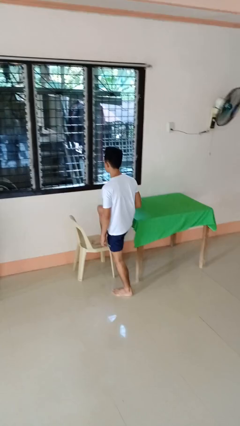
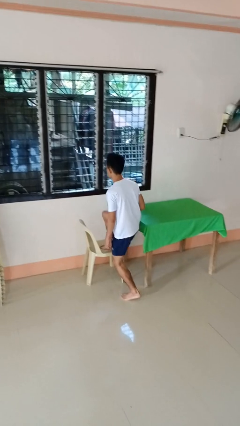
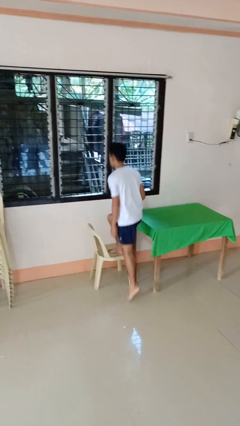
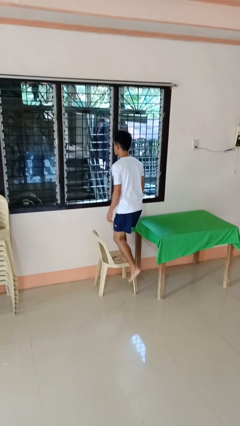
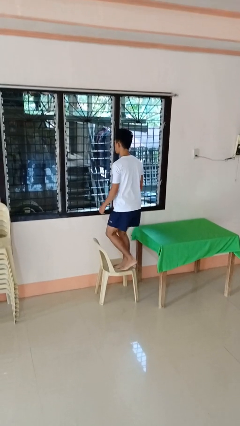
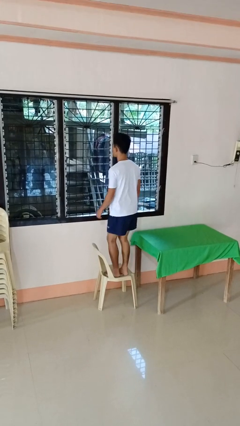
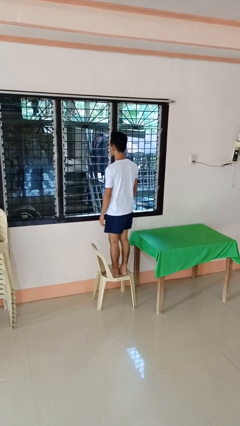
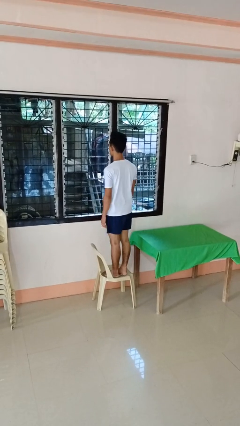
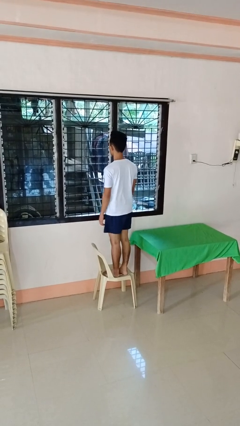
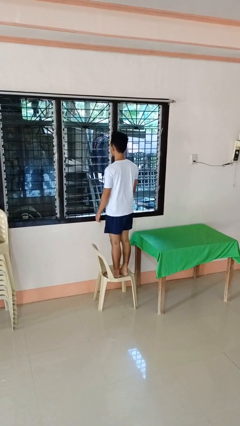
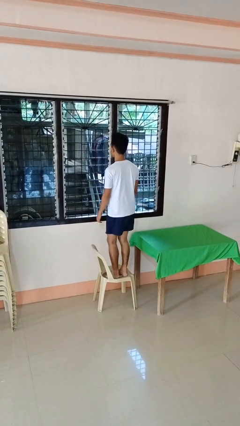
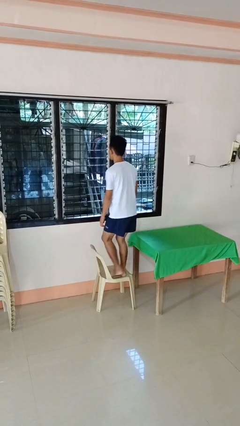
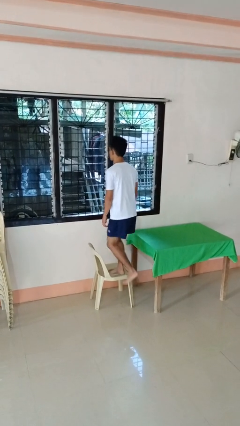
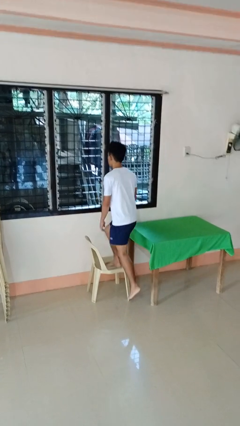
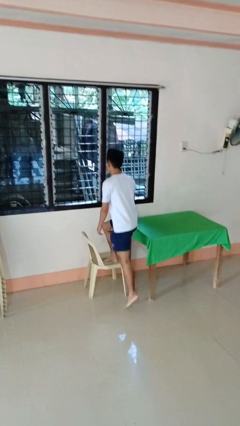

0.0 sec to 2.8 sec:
person climbs on chair

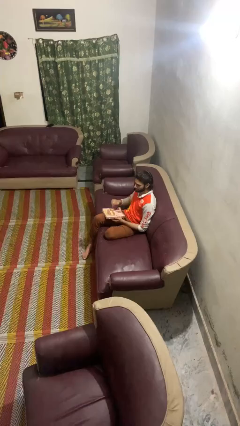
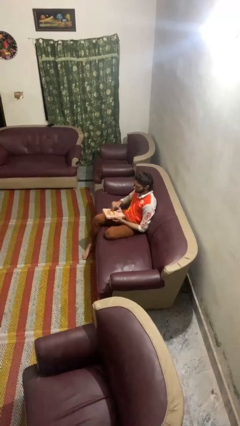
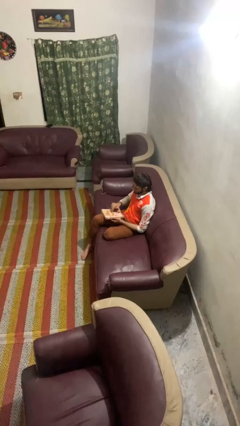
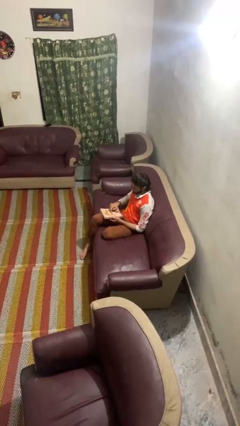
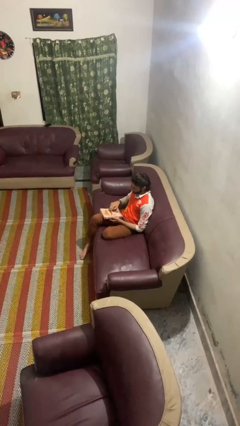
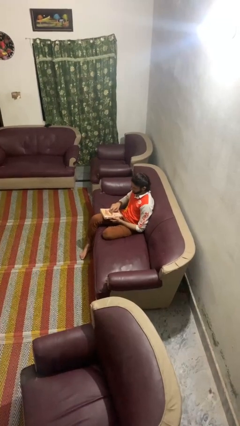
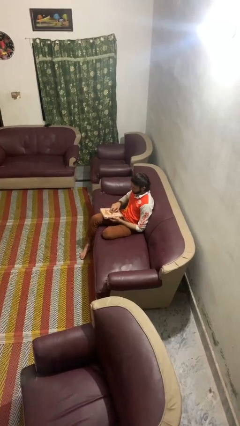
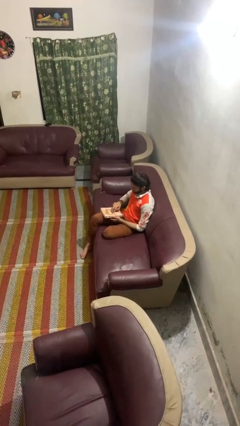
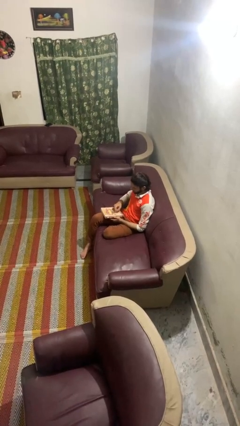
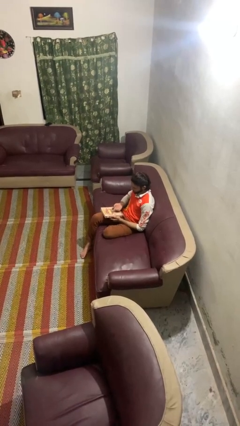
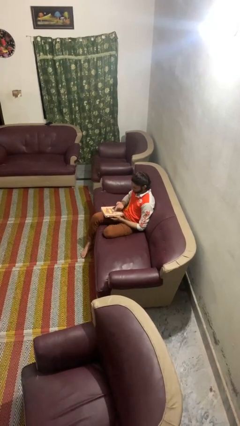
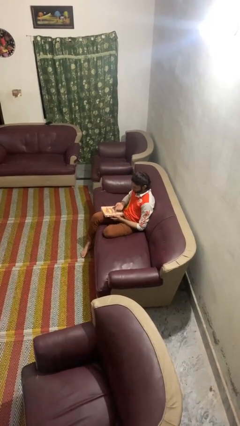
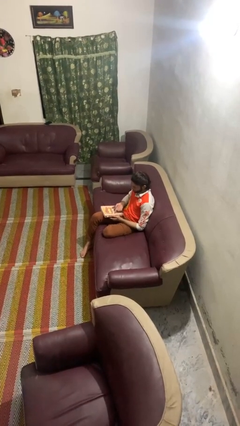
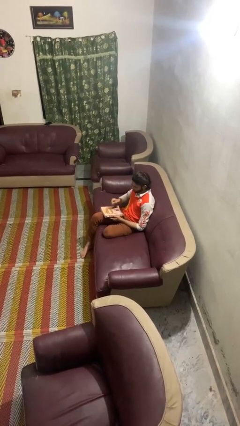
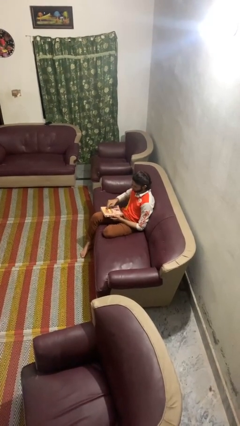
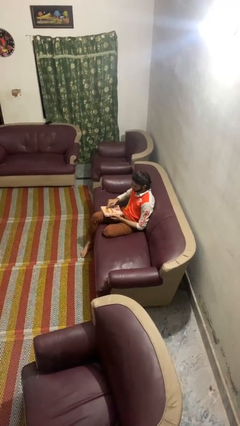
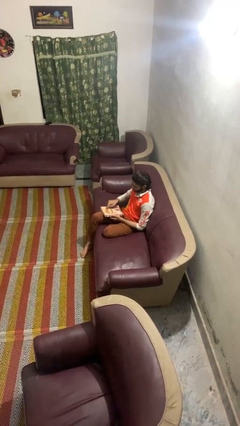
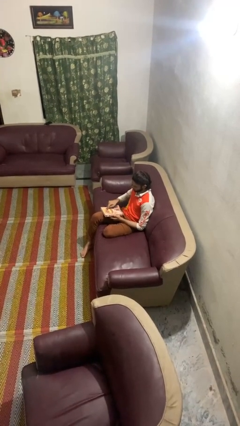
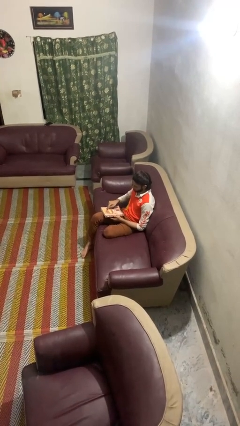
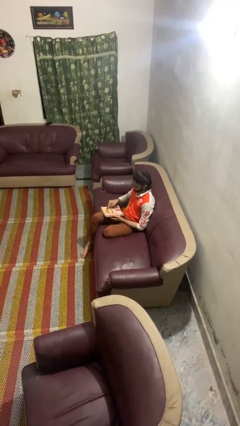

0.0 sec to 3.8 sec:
person taps object with finger

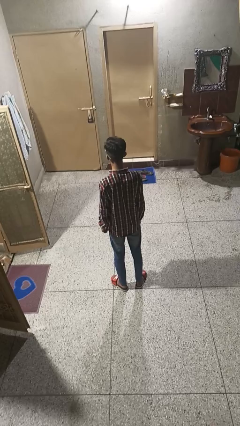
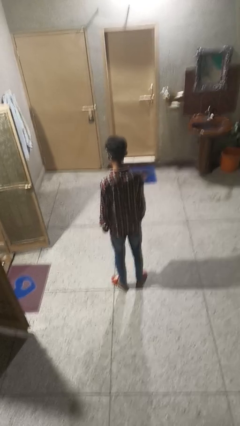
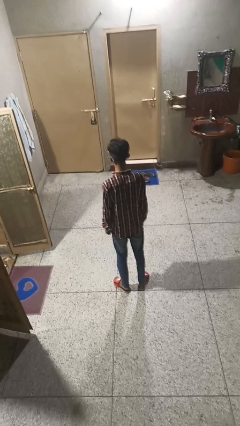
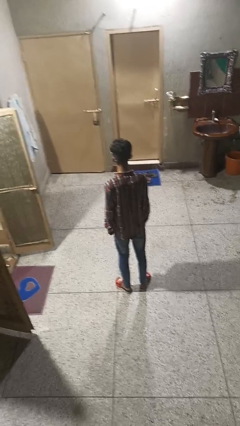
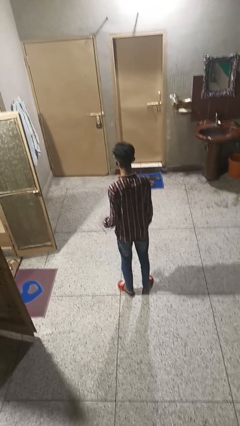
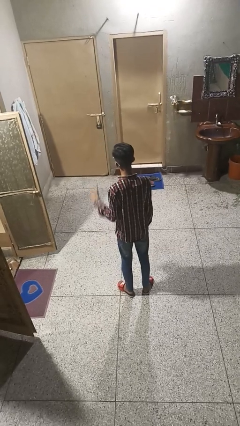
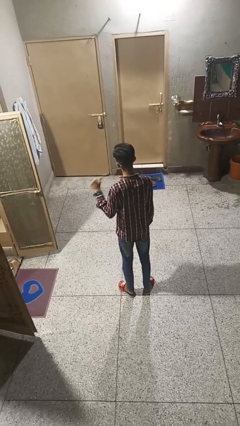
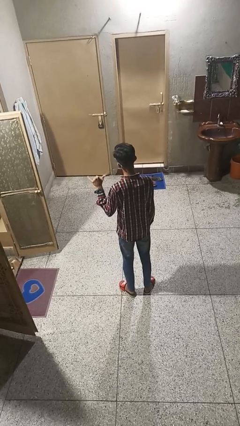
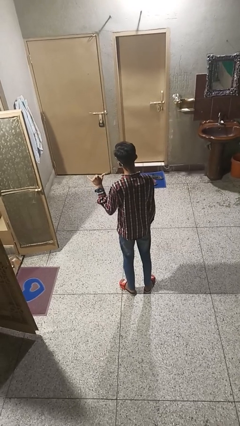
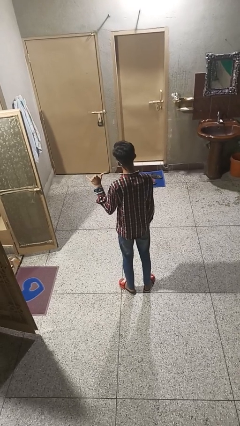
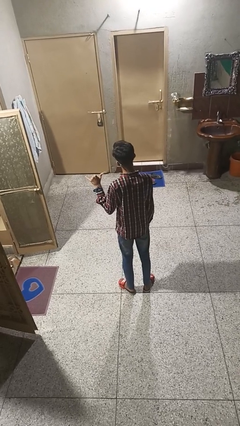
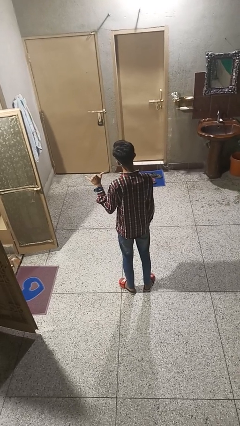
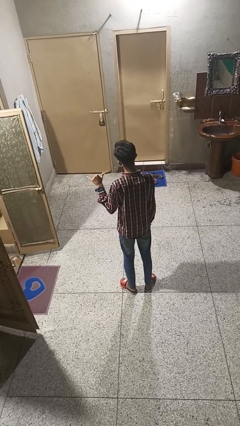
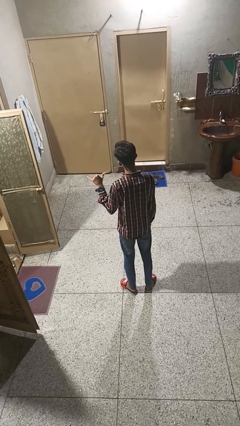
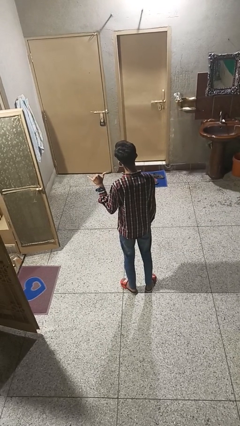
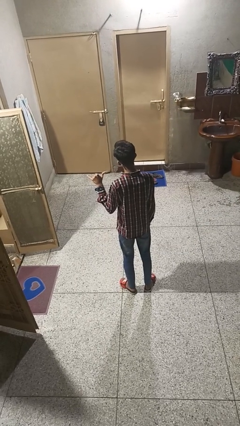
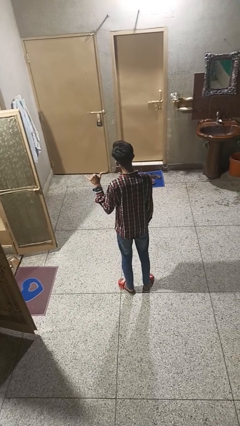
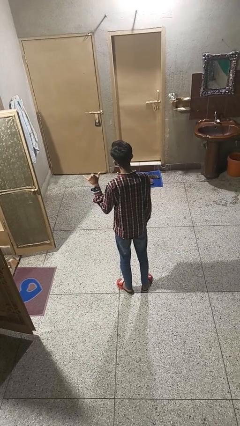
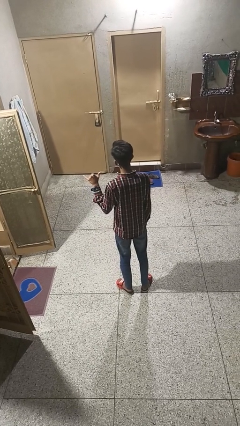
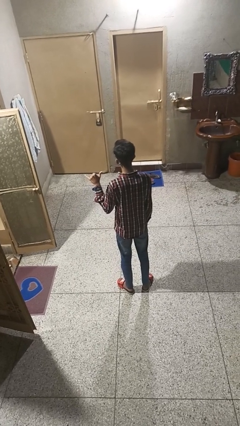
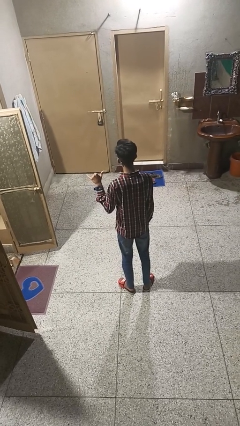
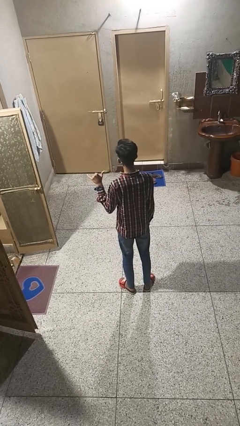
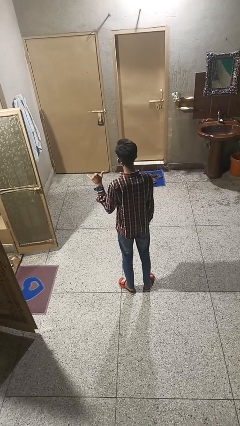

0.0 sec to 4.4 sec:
person gestures hang loose

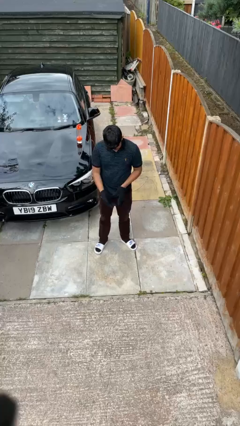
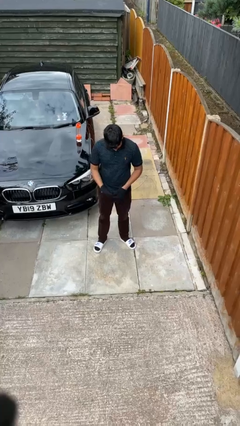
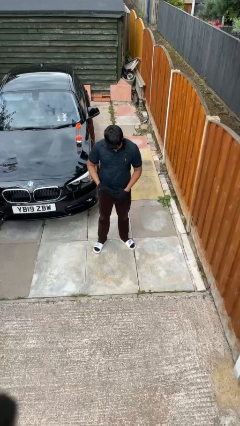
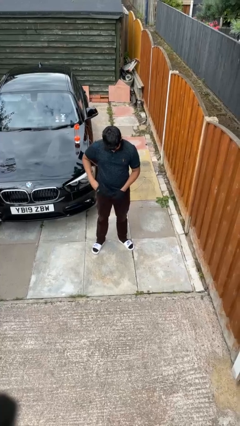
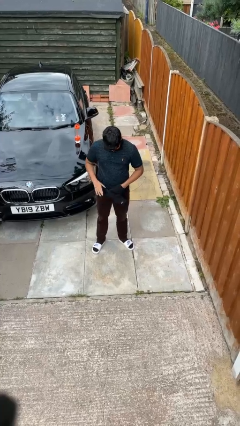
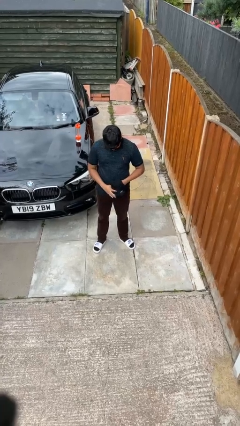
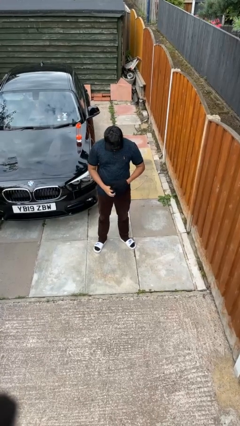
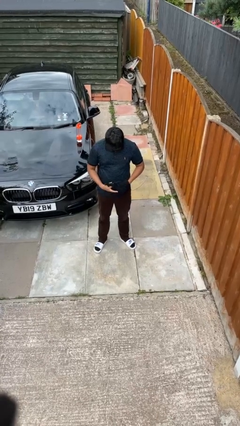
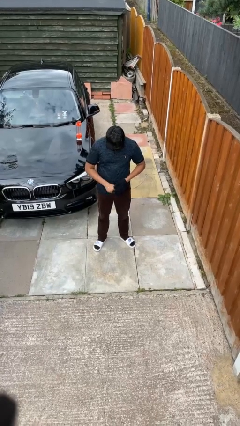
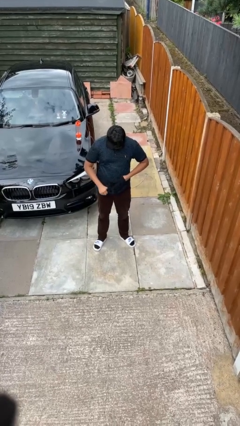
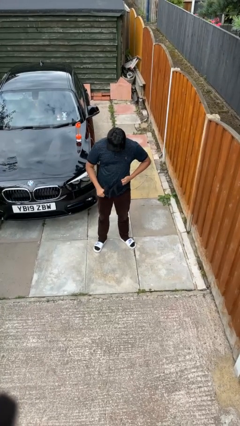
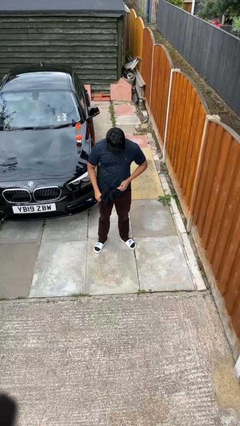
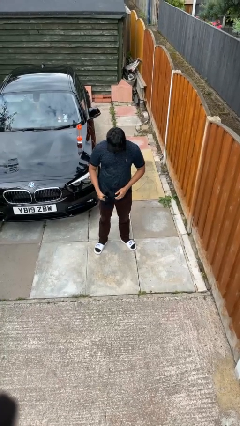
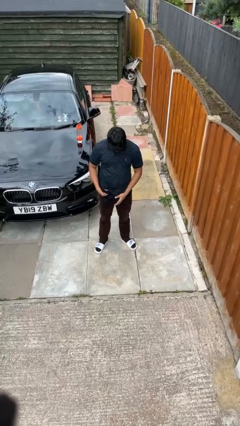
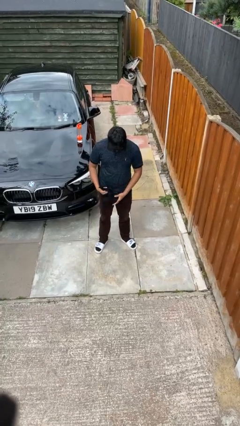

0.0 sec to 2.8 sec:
person takes off gloves

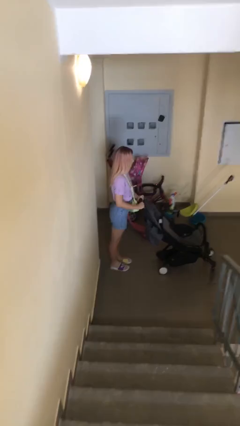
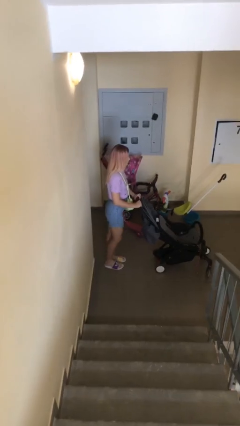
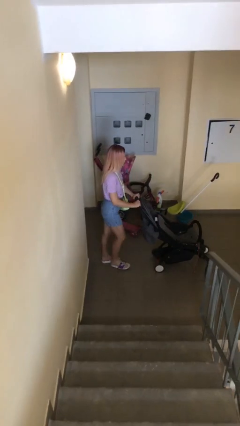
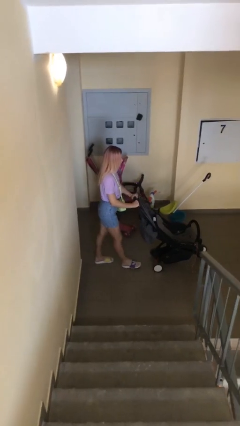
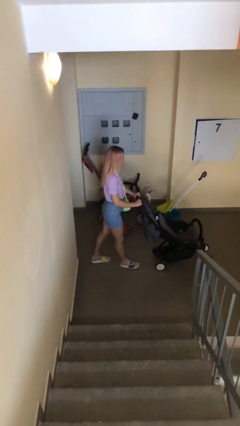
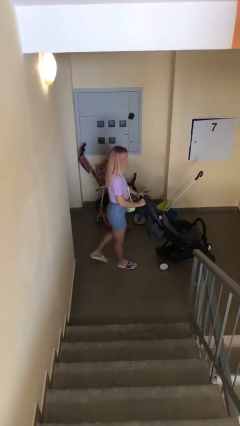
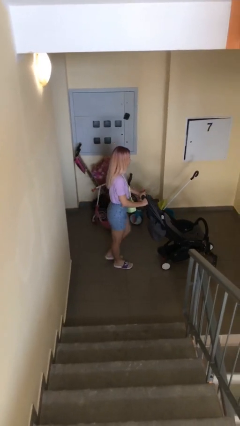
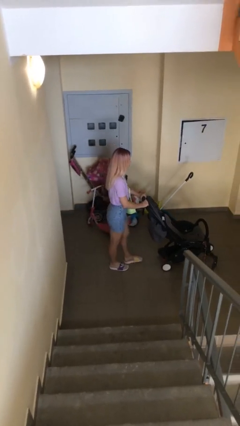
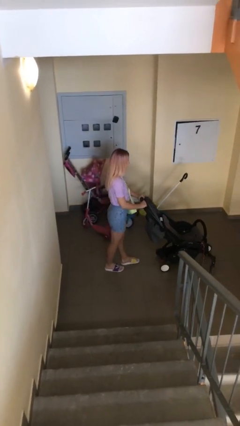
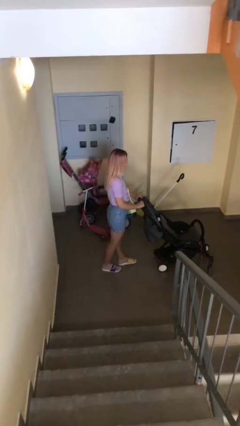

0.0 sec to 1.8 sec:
person pushes wheeled cart

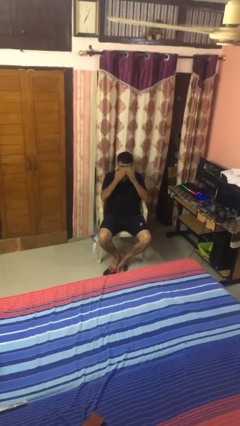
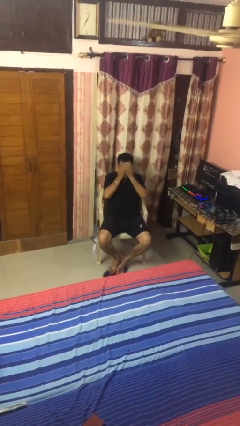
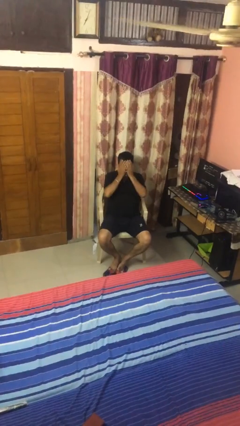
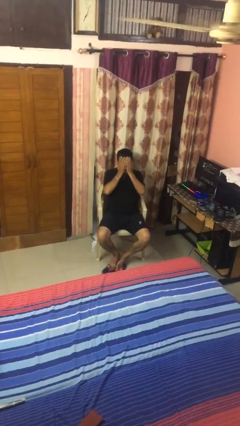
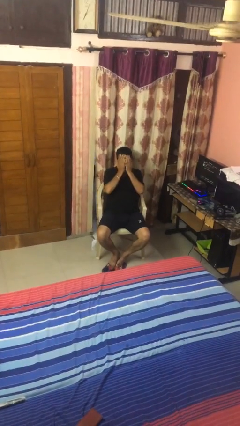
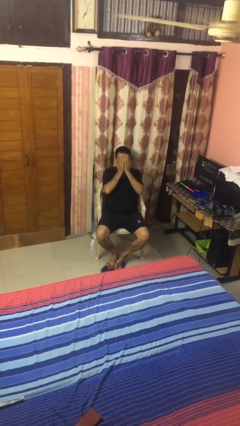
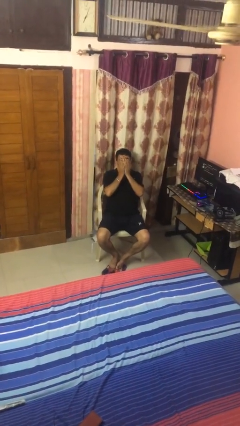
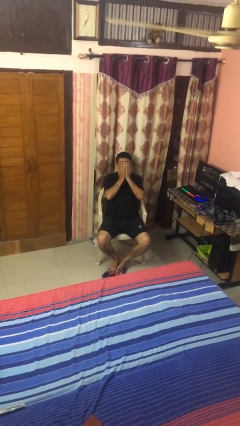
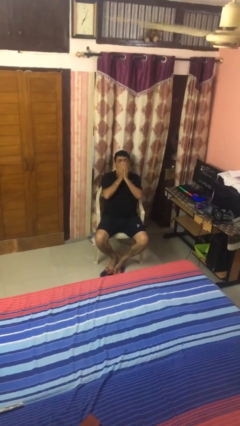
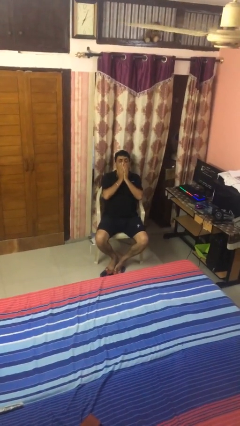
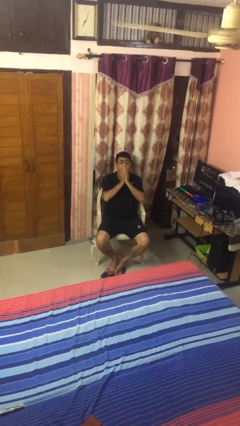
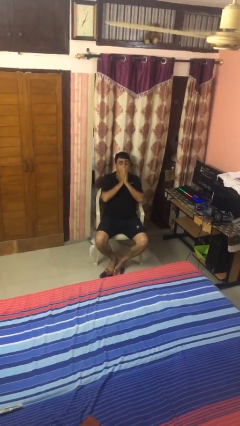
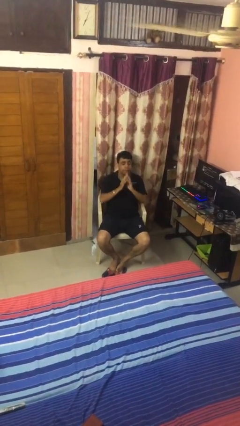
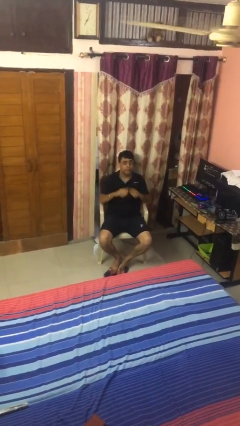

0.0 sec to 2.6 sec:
person covers face with hands
